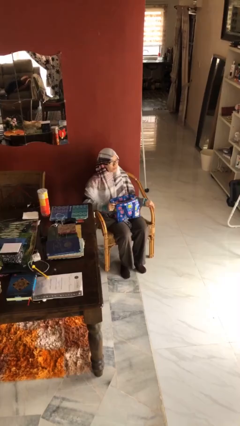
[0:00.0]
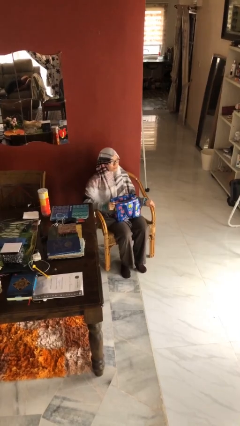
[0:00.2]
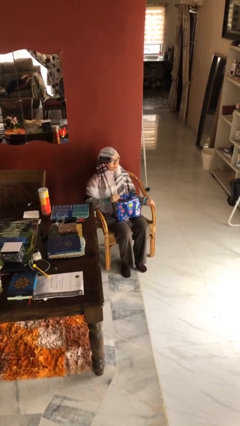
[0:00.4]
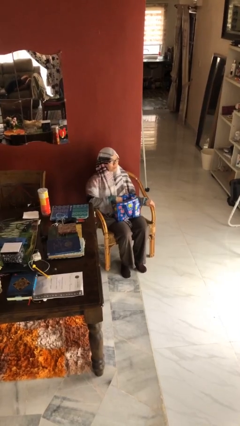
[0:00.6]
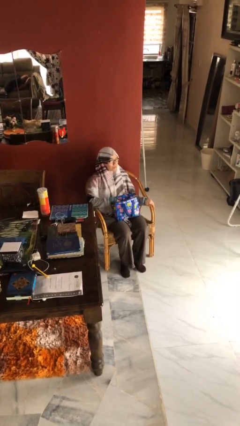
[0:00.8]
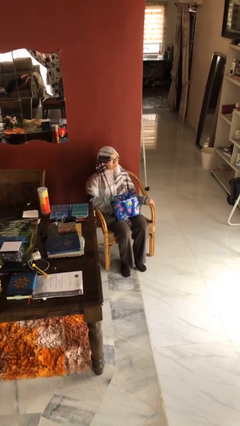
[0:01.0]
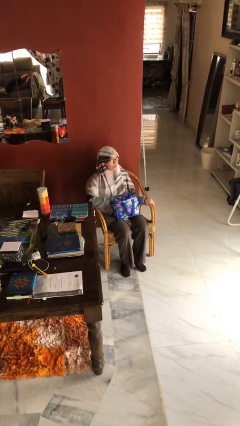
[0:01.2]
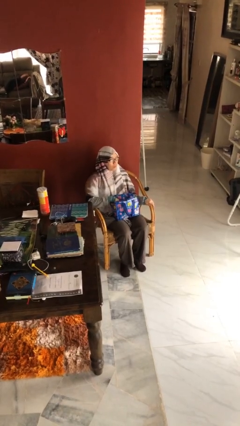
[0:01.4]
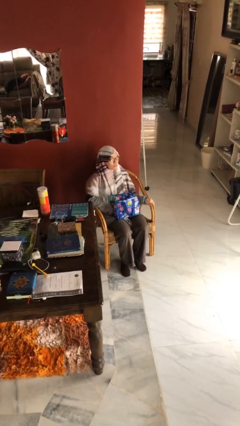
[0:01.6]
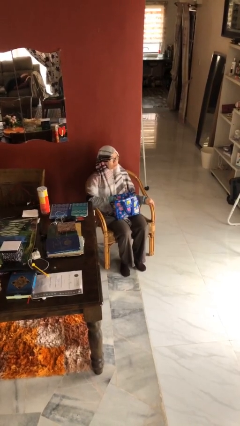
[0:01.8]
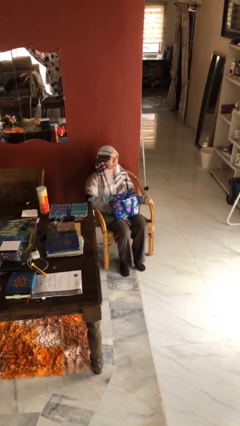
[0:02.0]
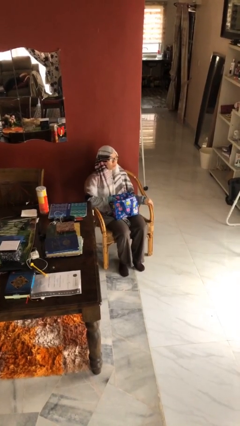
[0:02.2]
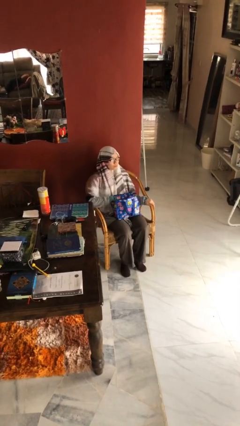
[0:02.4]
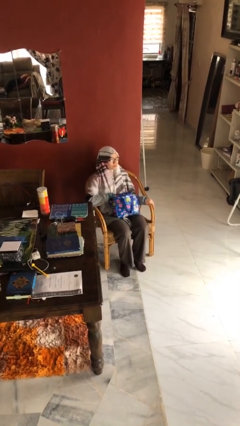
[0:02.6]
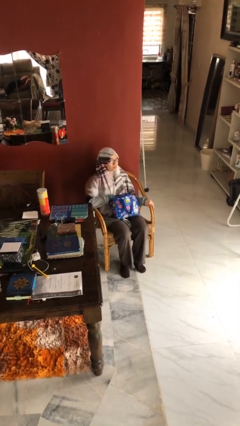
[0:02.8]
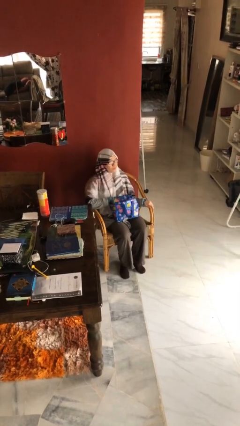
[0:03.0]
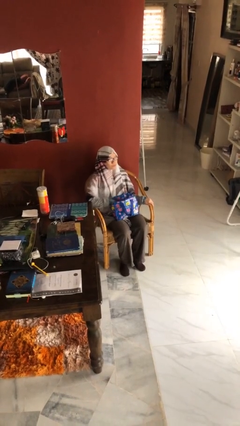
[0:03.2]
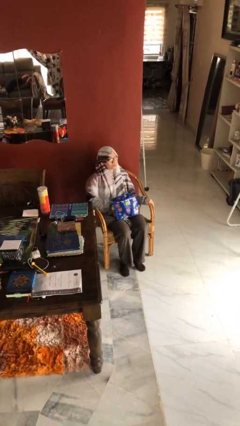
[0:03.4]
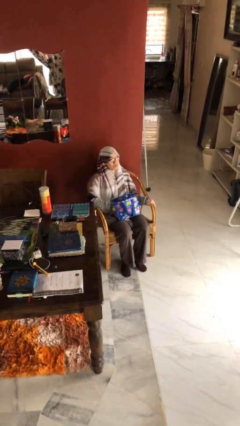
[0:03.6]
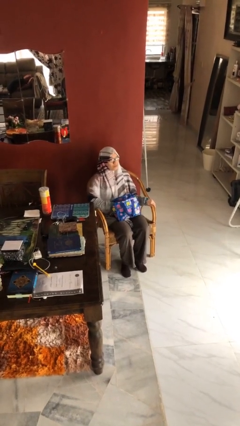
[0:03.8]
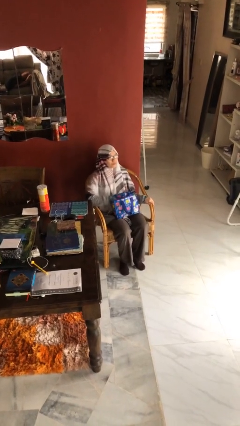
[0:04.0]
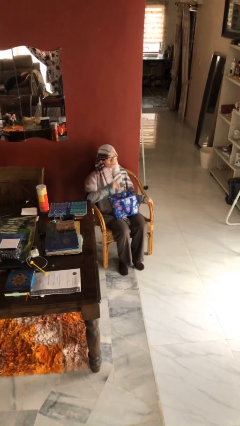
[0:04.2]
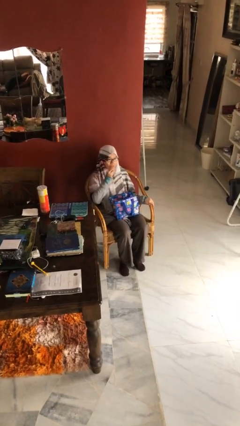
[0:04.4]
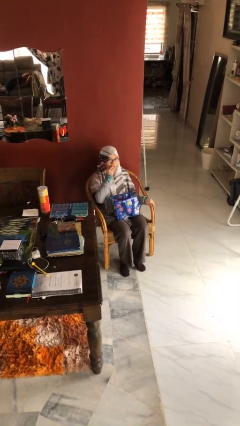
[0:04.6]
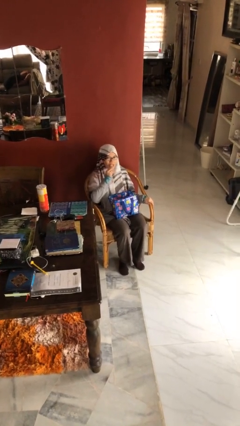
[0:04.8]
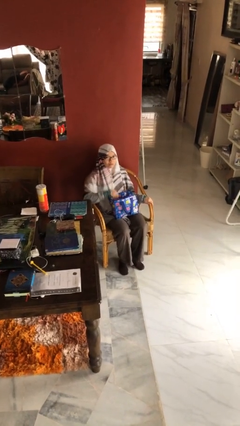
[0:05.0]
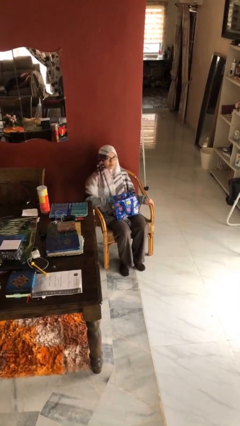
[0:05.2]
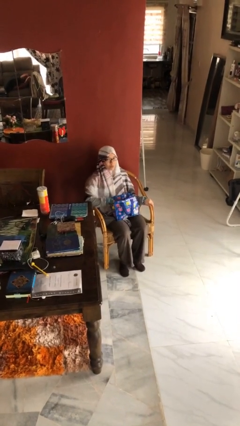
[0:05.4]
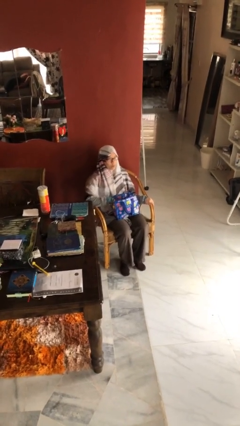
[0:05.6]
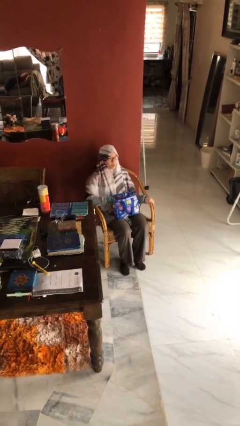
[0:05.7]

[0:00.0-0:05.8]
person eats snack from bag

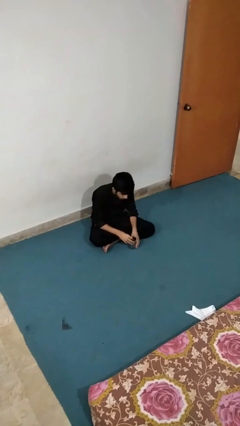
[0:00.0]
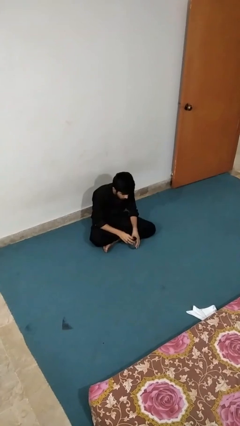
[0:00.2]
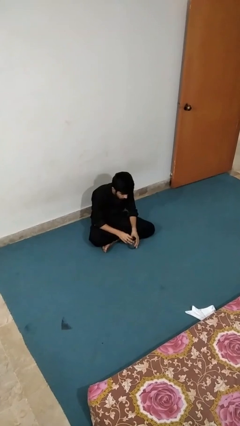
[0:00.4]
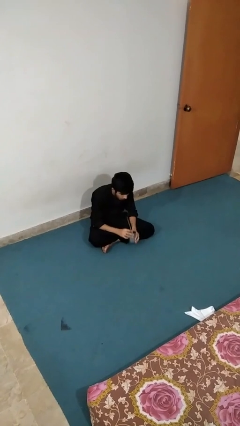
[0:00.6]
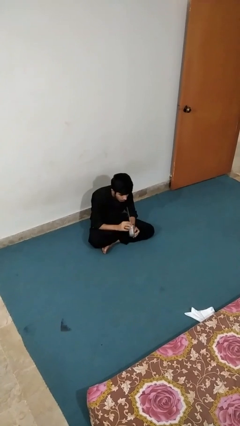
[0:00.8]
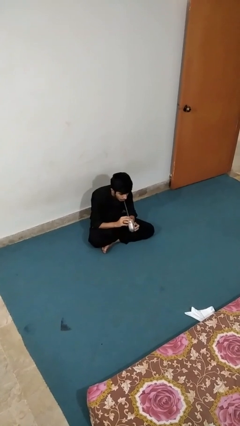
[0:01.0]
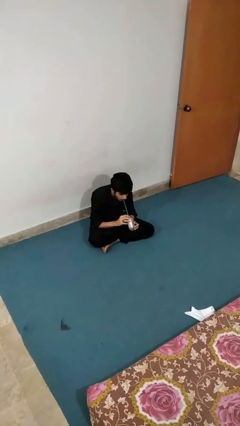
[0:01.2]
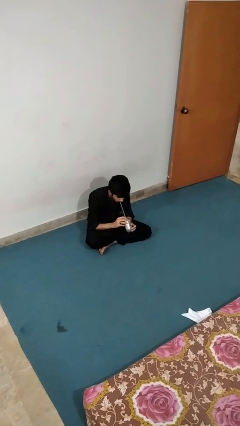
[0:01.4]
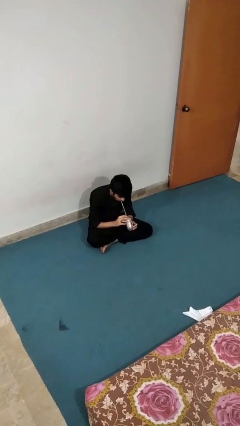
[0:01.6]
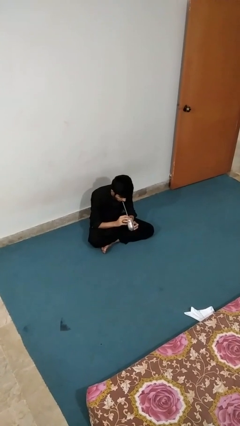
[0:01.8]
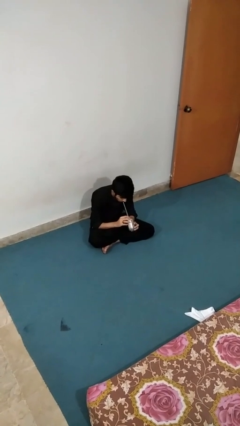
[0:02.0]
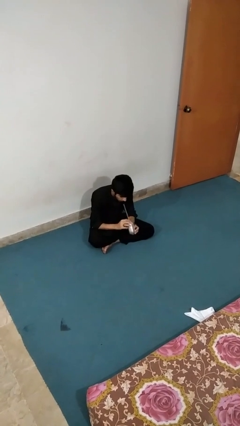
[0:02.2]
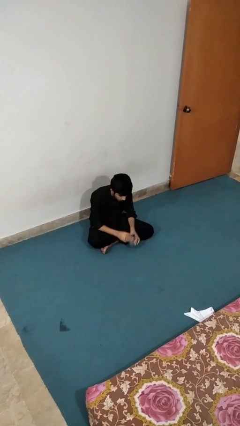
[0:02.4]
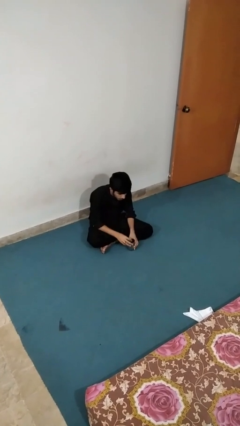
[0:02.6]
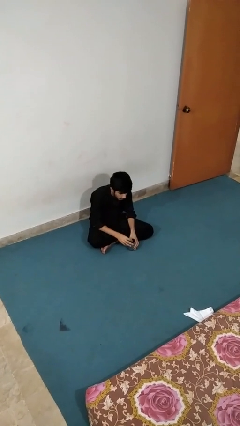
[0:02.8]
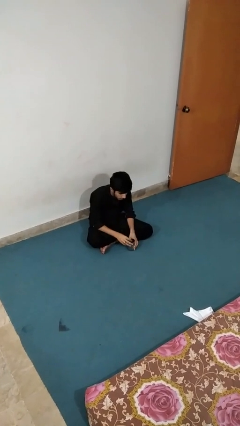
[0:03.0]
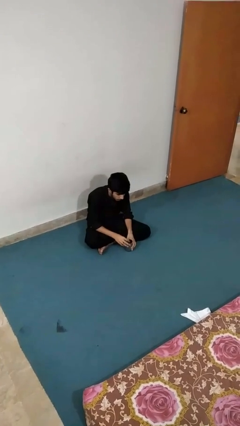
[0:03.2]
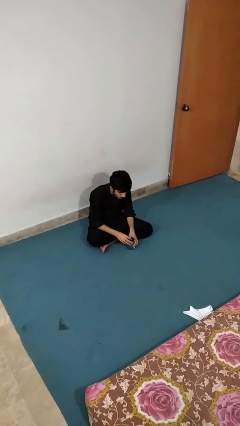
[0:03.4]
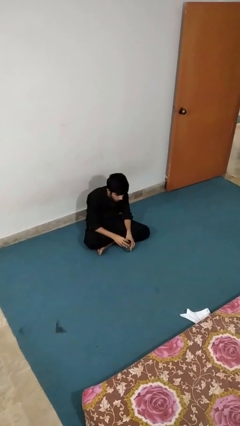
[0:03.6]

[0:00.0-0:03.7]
person drinks from straw

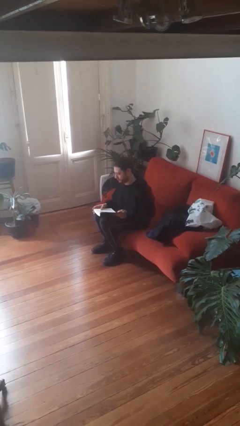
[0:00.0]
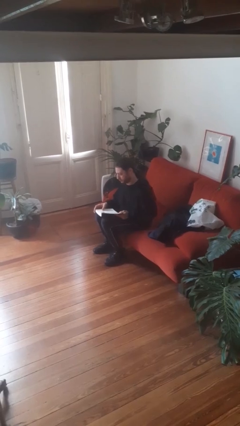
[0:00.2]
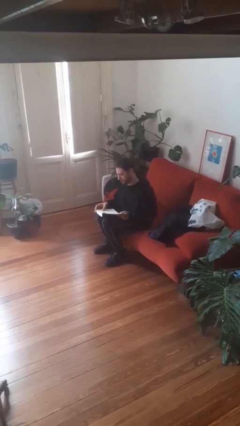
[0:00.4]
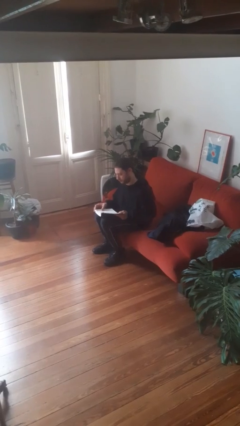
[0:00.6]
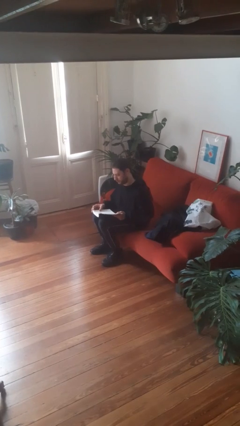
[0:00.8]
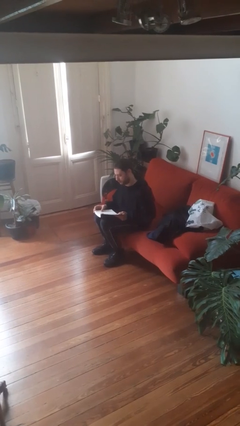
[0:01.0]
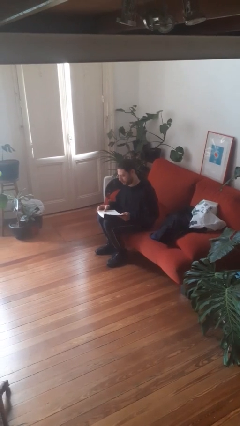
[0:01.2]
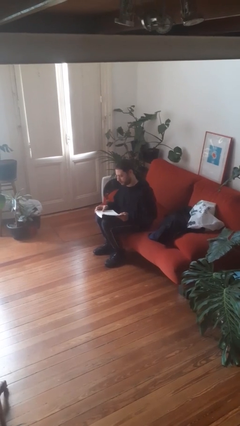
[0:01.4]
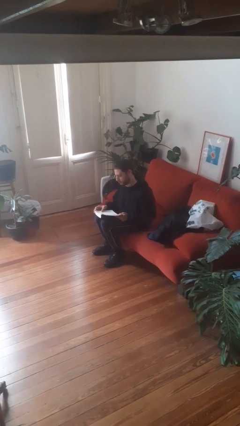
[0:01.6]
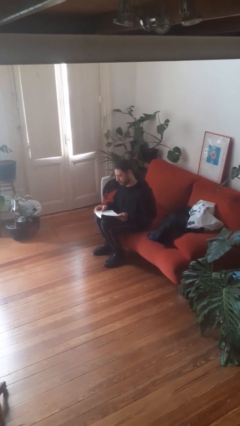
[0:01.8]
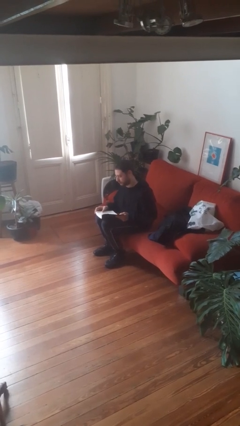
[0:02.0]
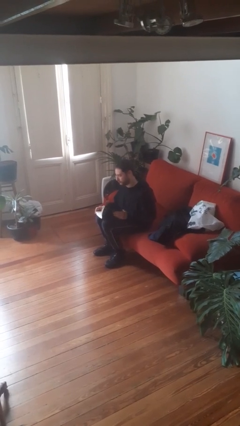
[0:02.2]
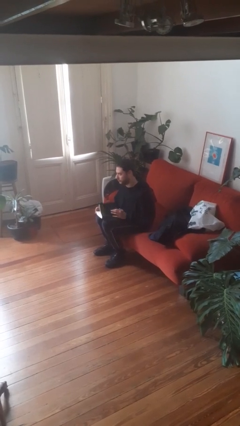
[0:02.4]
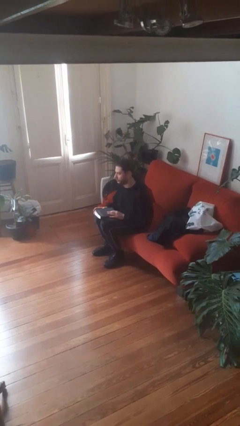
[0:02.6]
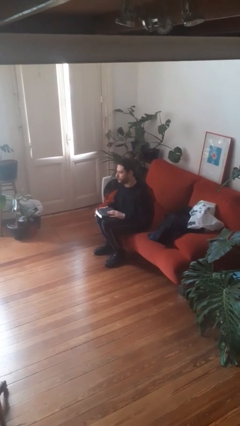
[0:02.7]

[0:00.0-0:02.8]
person reads book

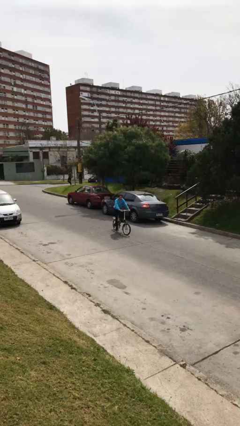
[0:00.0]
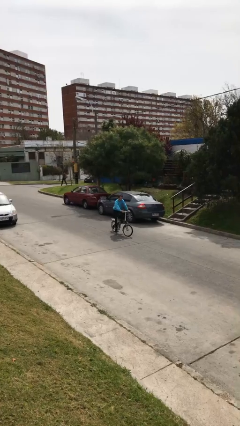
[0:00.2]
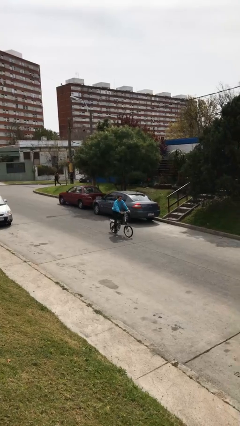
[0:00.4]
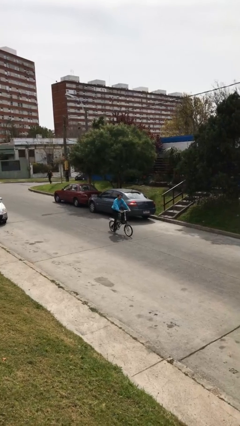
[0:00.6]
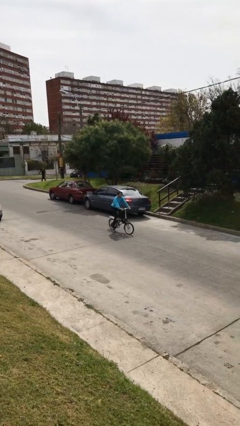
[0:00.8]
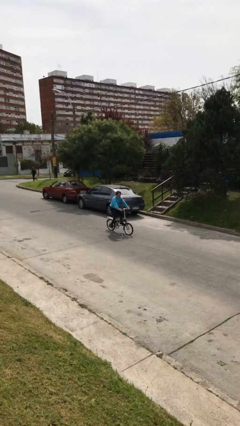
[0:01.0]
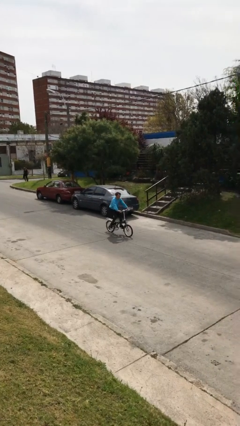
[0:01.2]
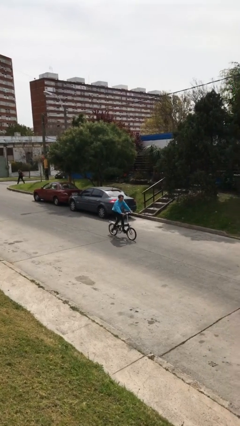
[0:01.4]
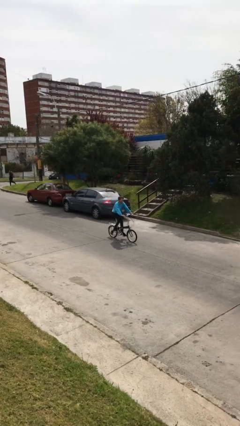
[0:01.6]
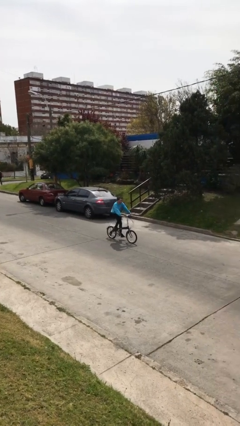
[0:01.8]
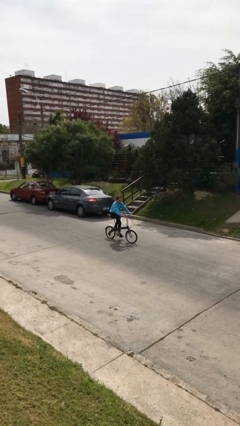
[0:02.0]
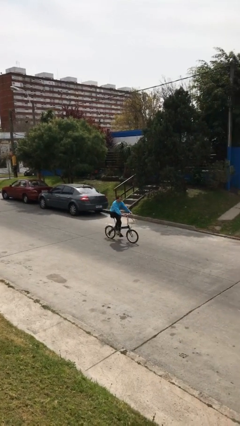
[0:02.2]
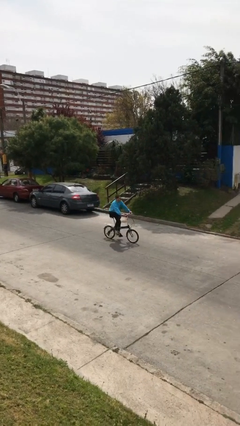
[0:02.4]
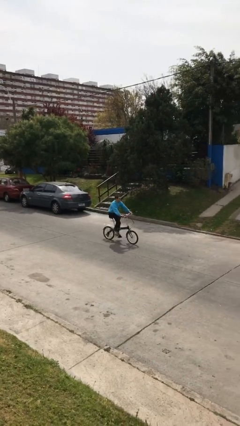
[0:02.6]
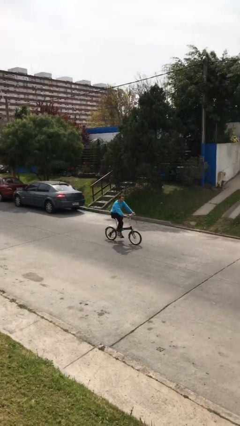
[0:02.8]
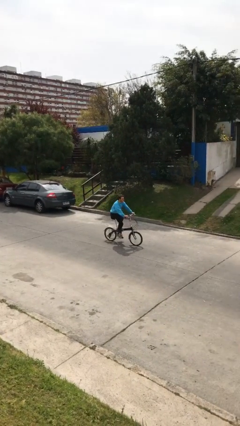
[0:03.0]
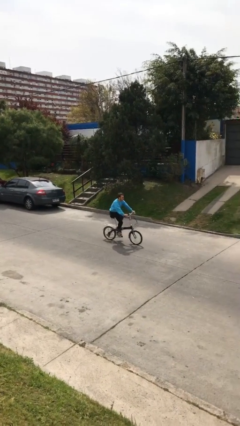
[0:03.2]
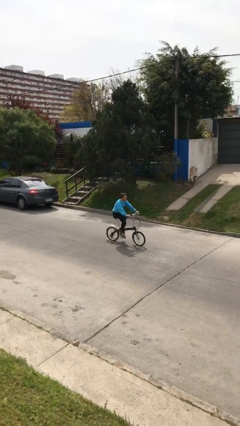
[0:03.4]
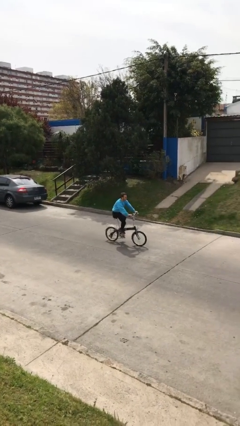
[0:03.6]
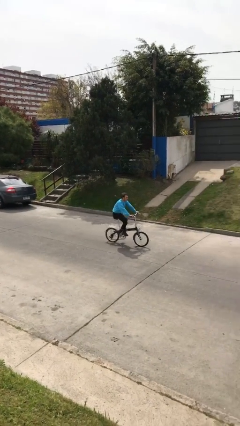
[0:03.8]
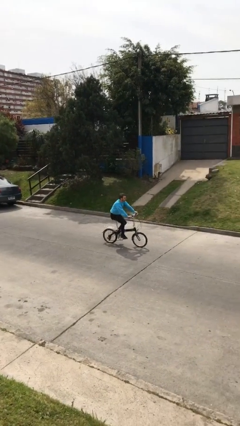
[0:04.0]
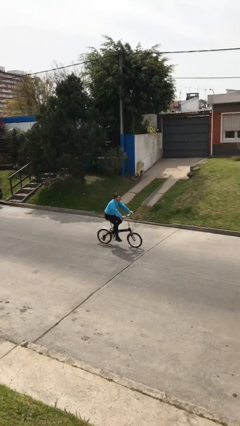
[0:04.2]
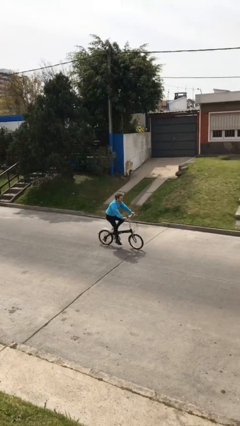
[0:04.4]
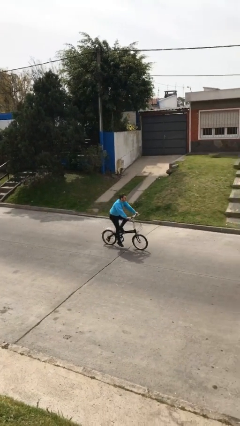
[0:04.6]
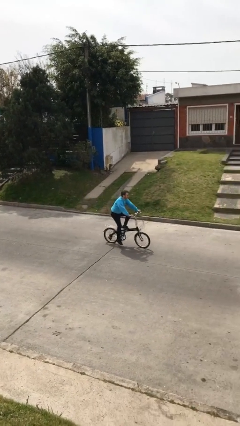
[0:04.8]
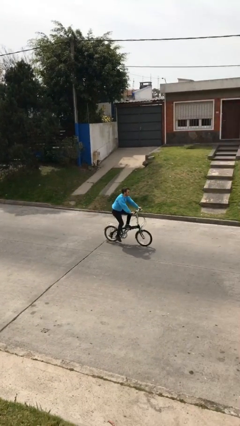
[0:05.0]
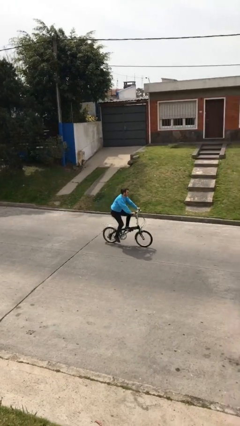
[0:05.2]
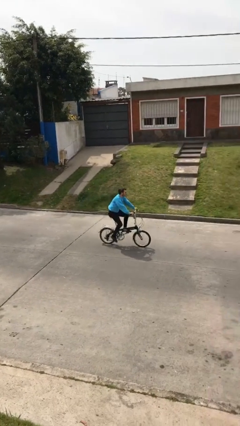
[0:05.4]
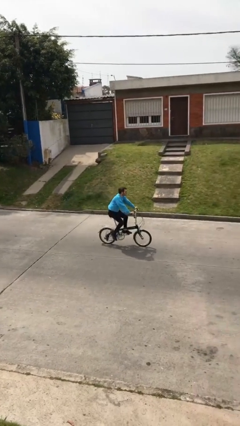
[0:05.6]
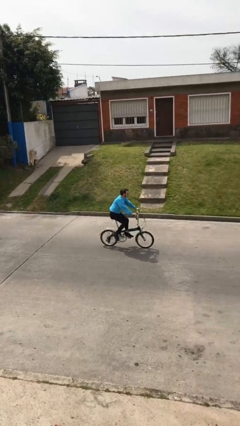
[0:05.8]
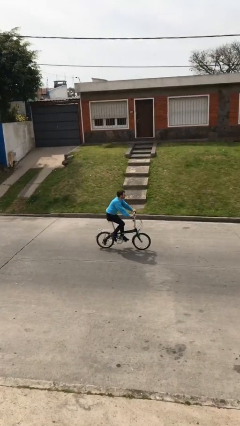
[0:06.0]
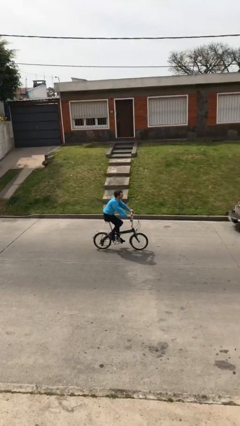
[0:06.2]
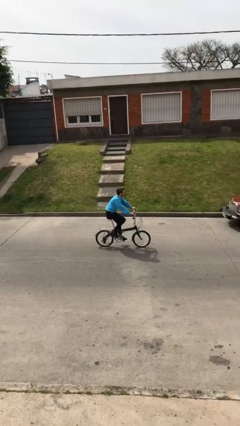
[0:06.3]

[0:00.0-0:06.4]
person rides bicycle
